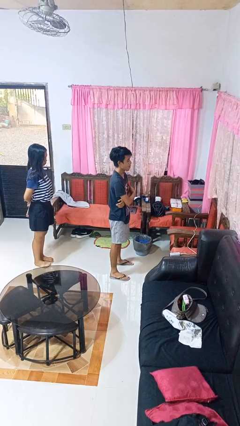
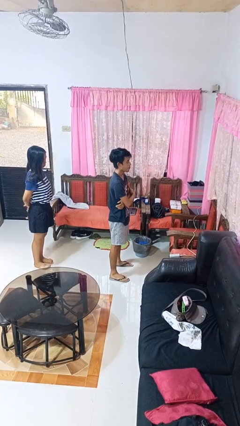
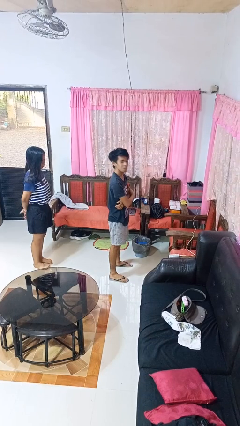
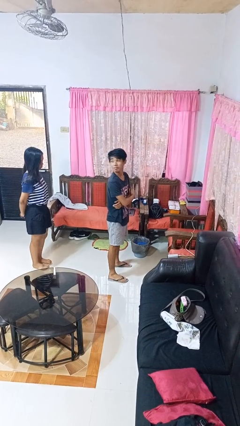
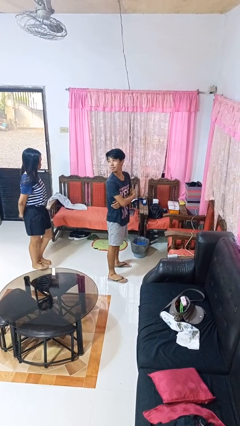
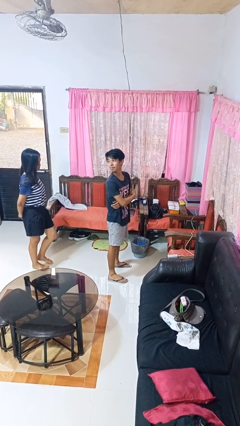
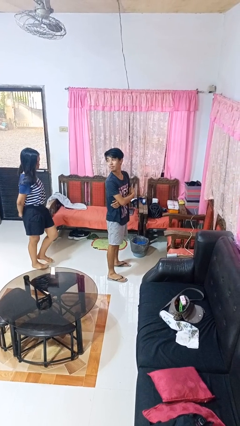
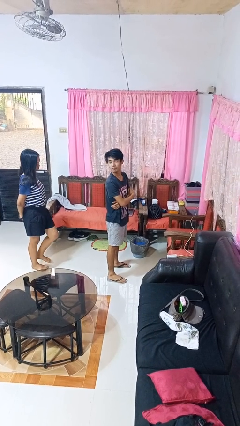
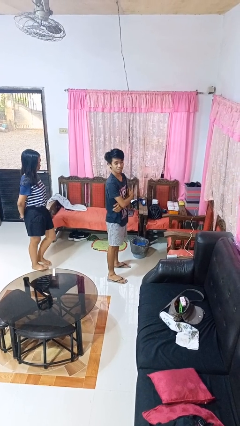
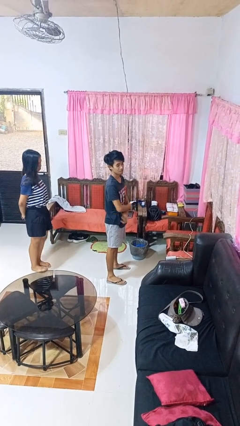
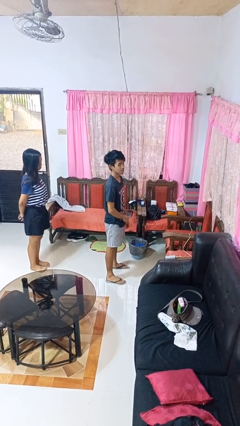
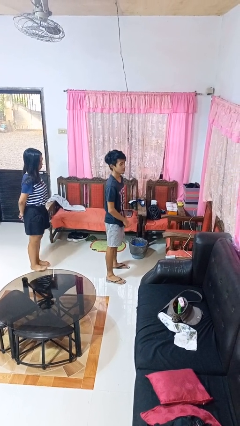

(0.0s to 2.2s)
person looks over shoulder

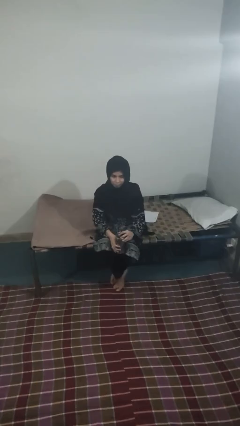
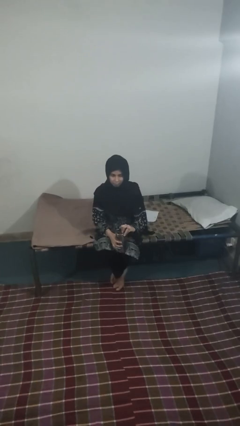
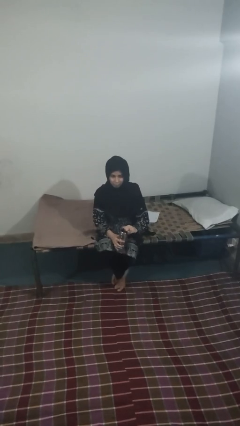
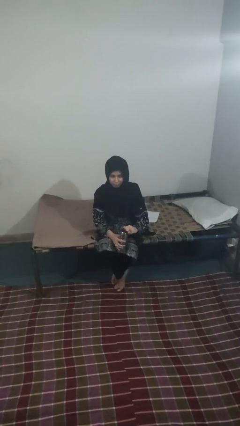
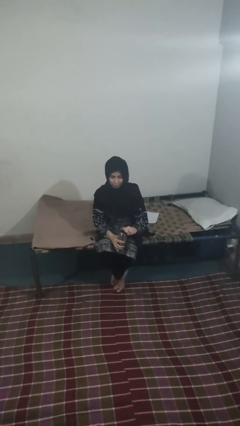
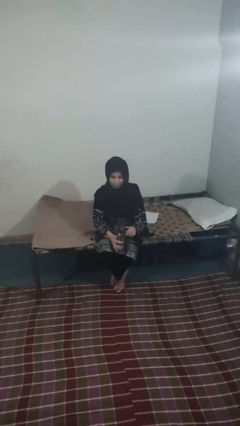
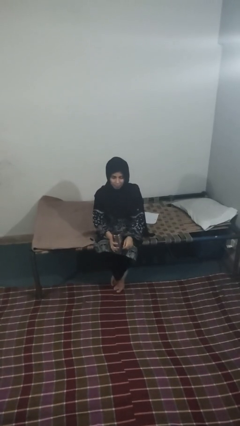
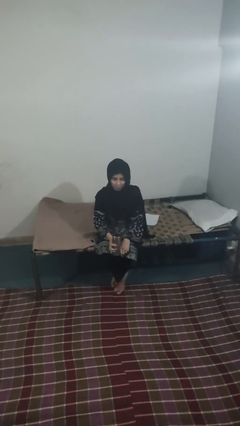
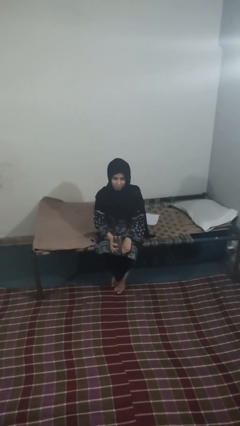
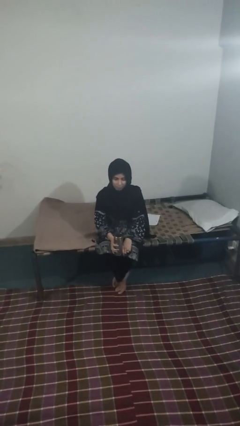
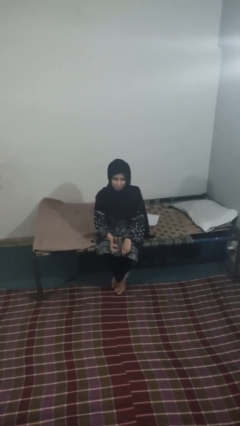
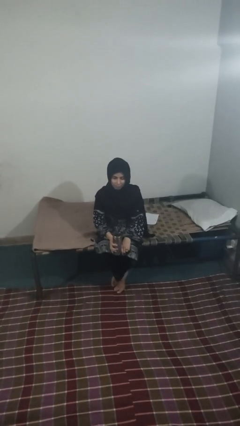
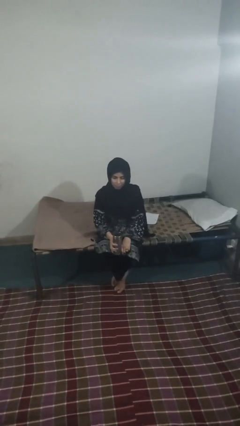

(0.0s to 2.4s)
person opens beverage can

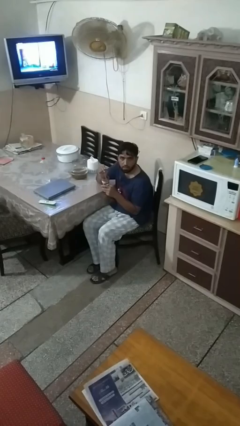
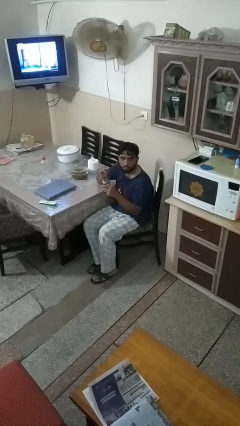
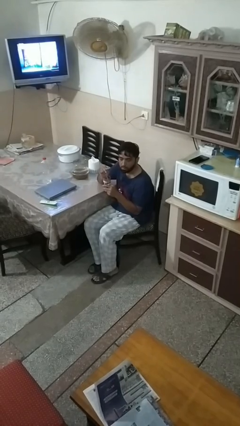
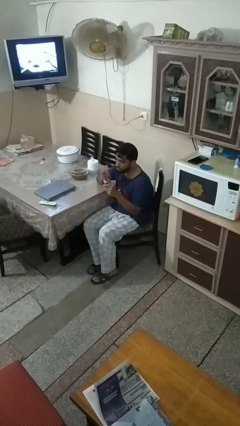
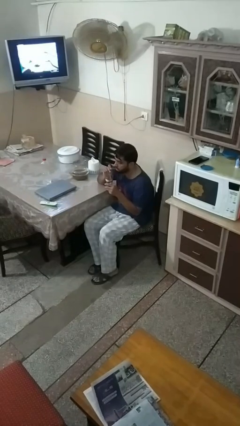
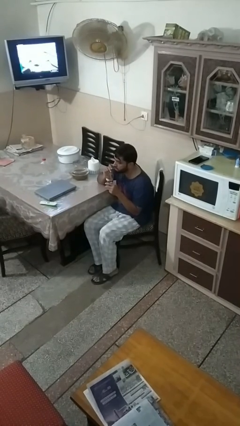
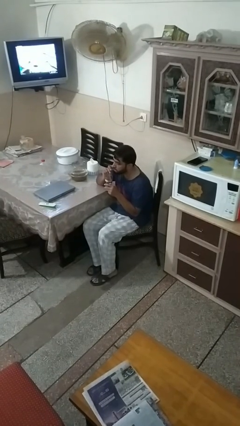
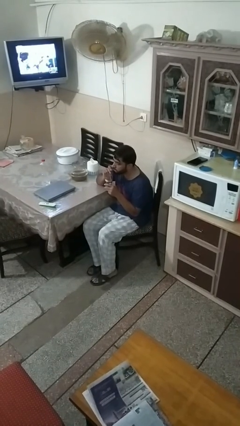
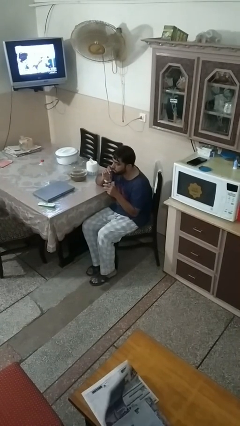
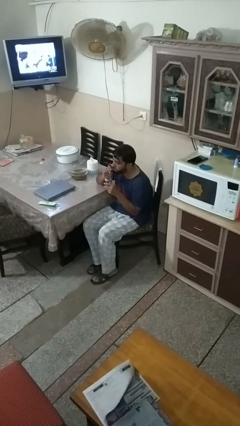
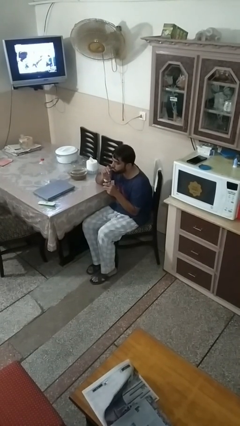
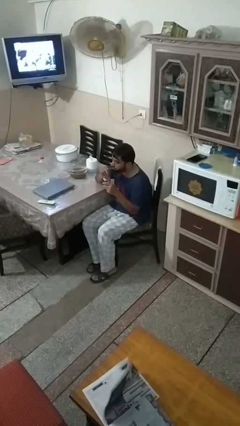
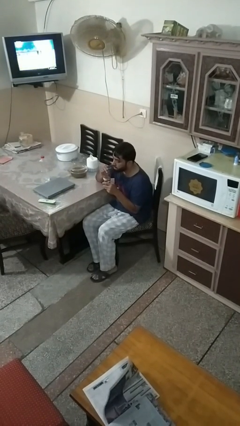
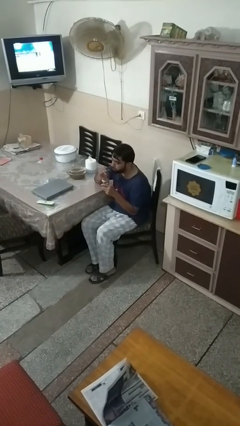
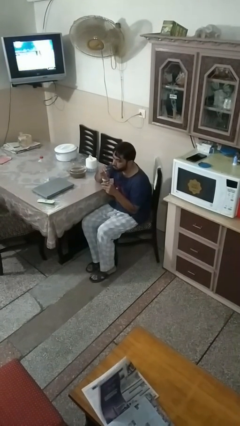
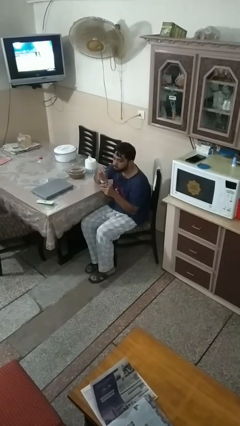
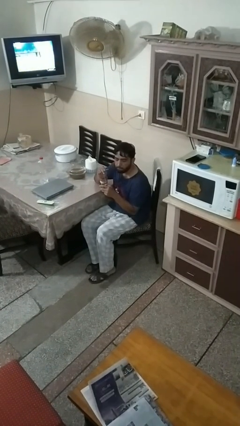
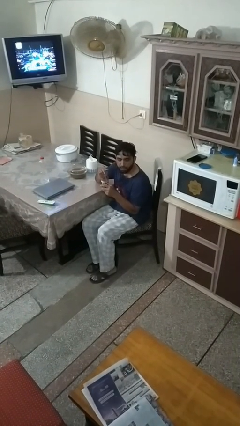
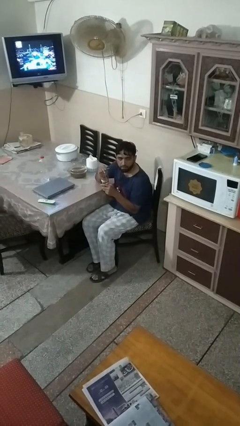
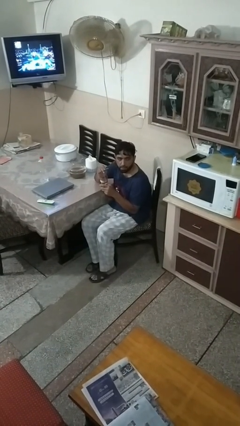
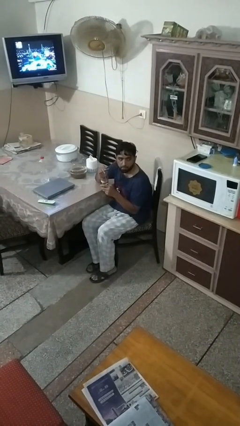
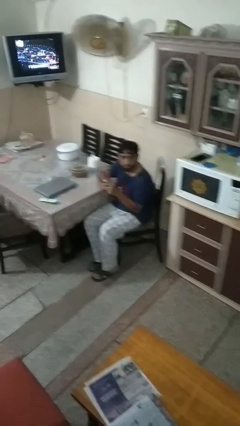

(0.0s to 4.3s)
person drinks from straw

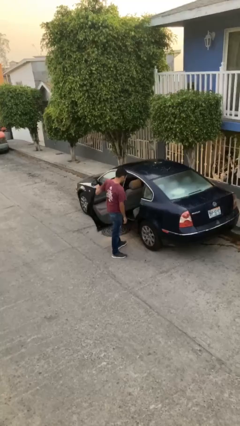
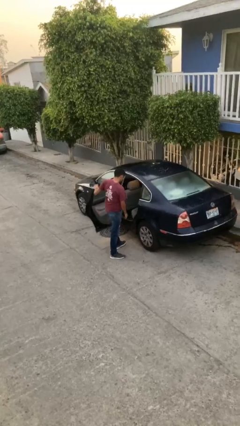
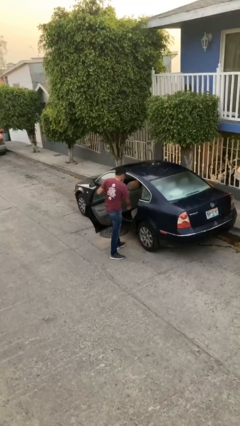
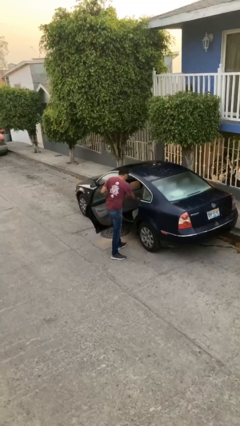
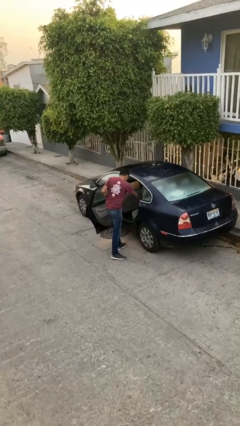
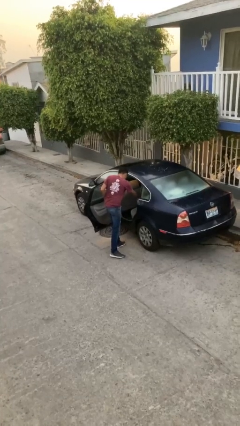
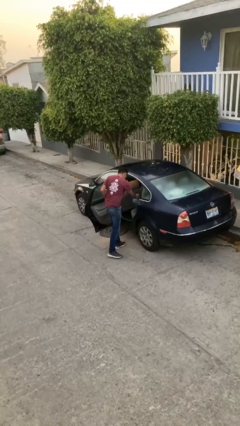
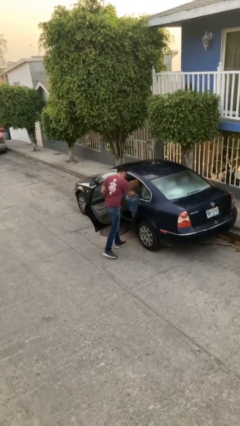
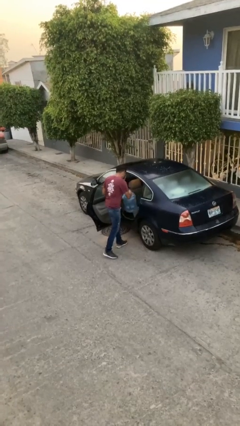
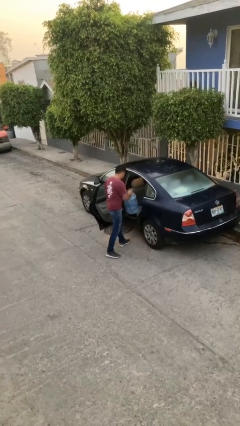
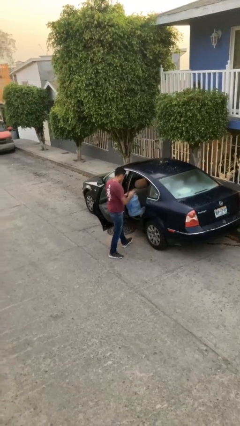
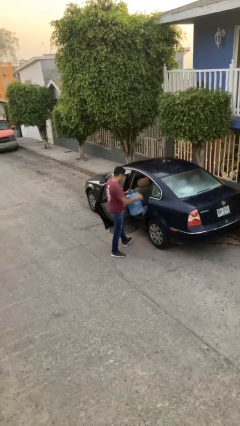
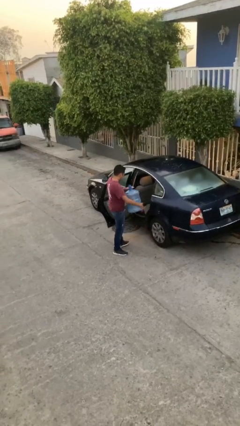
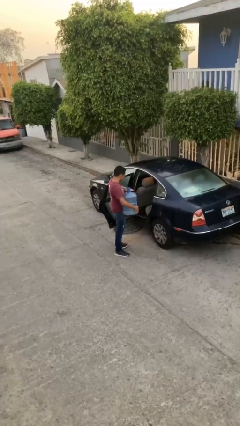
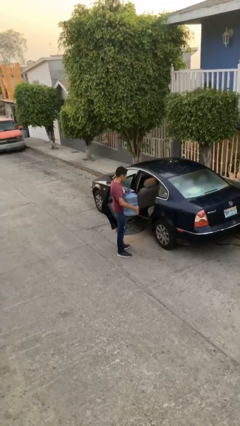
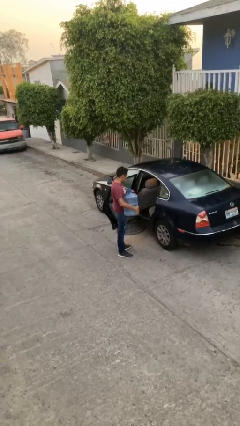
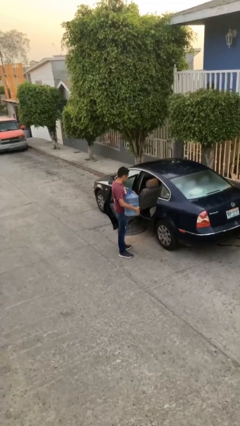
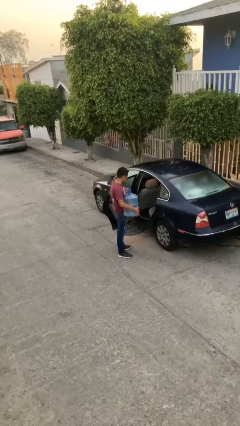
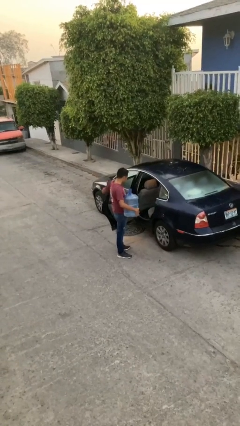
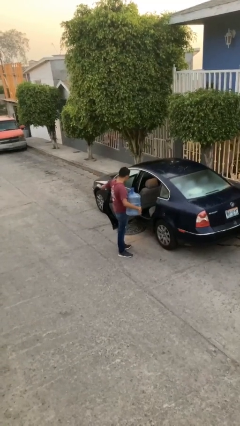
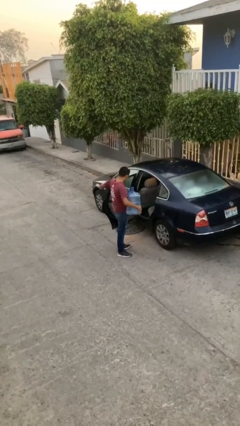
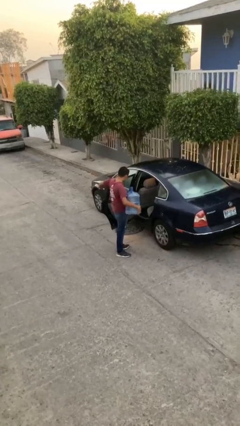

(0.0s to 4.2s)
person unloads car

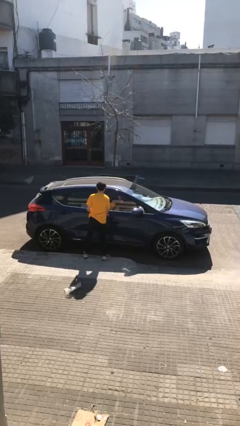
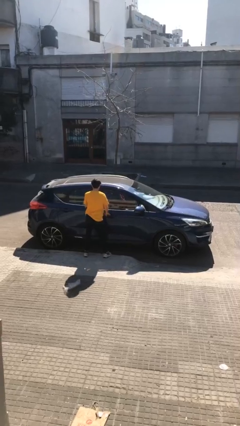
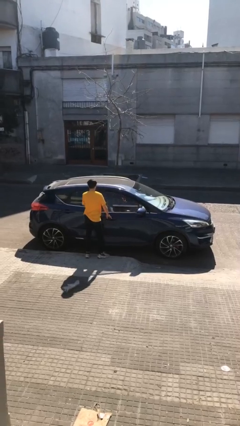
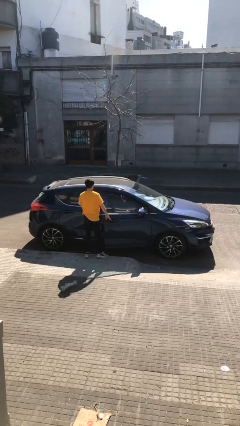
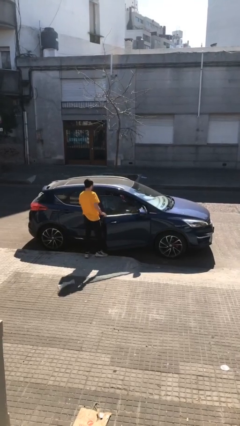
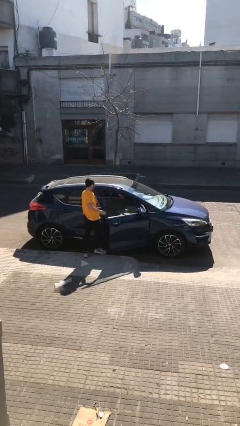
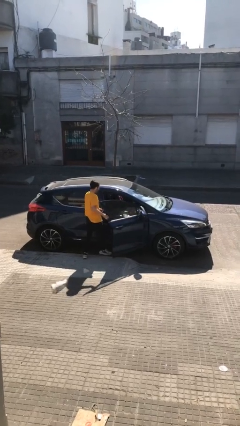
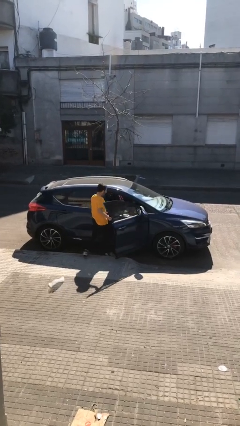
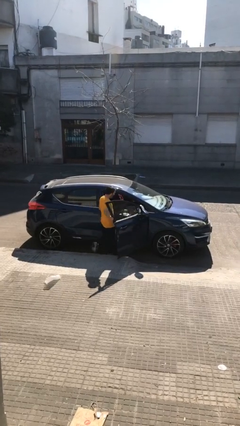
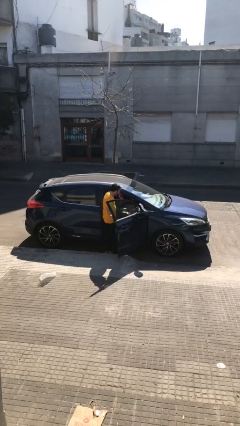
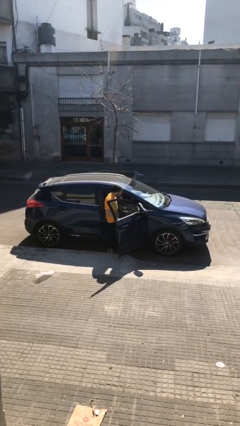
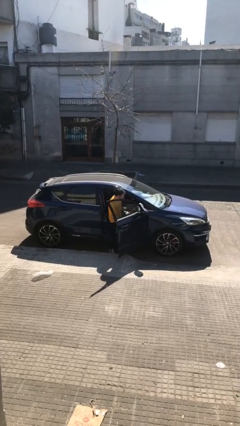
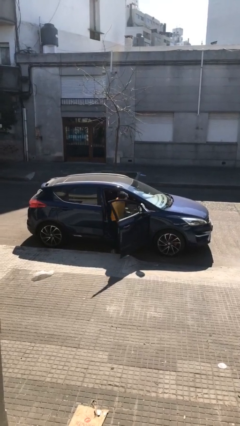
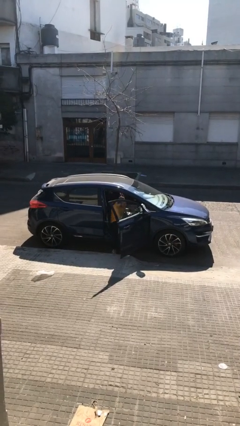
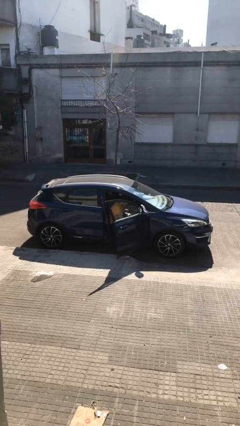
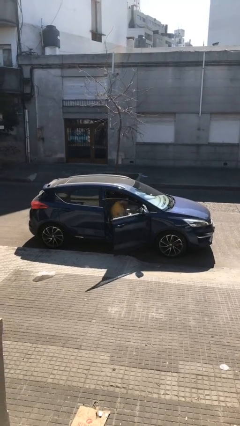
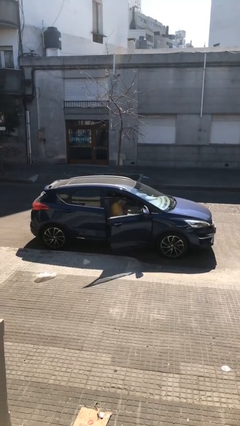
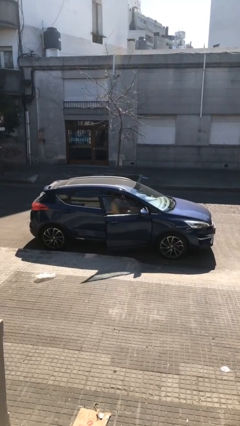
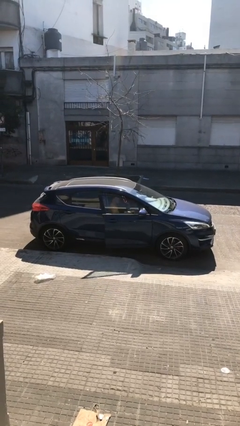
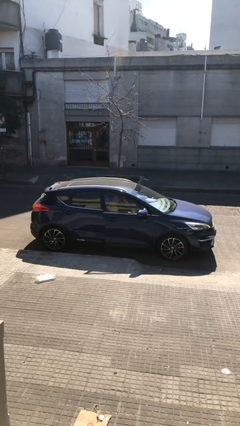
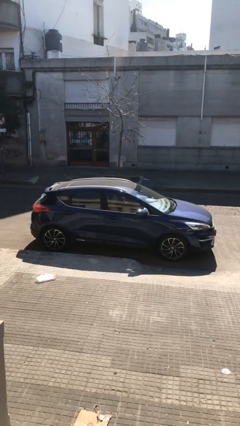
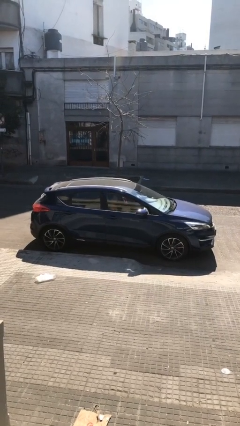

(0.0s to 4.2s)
car picks up person

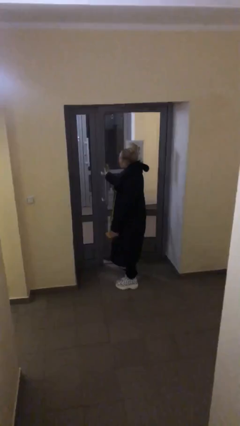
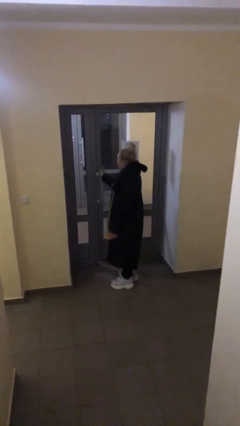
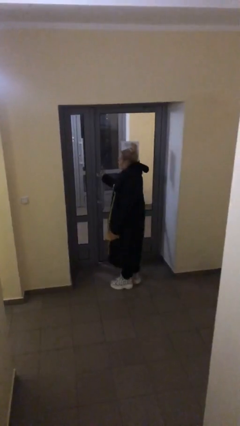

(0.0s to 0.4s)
person closes facility door
